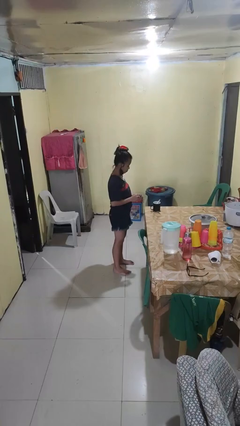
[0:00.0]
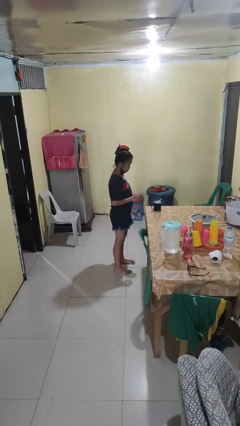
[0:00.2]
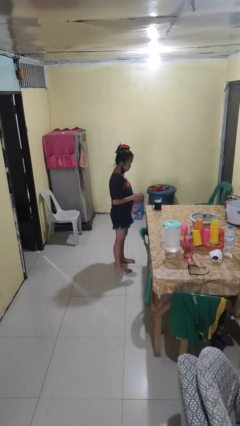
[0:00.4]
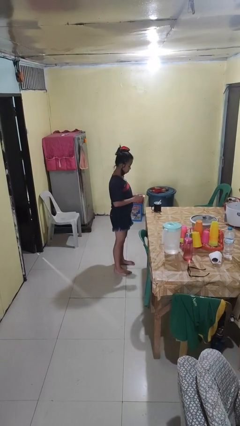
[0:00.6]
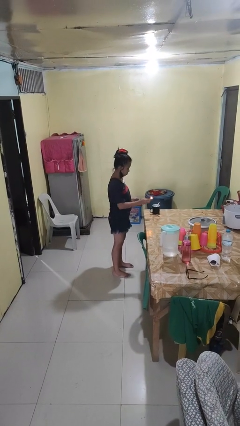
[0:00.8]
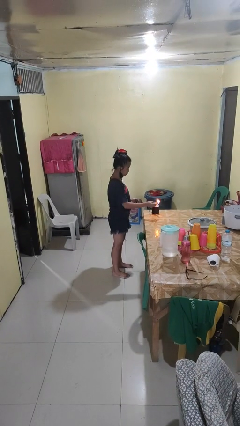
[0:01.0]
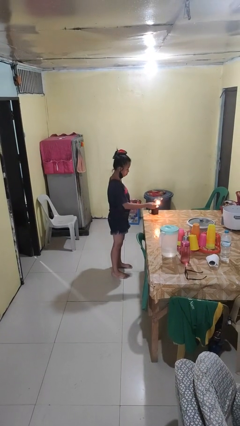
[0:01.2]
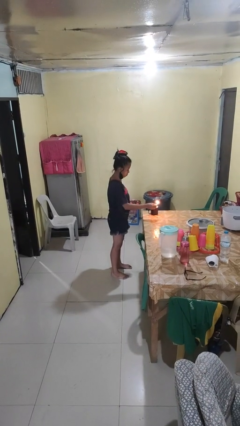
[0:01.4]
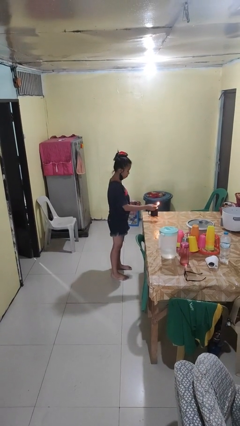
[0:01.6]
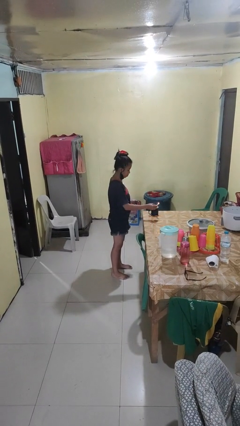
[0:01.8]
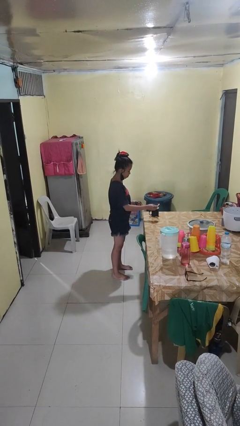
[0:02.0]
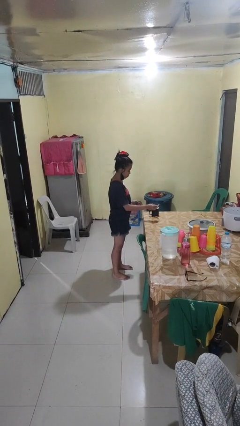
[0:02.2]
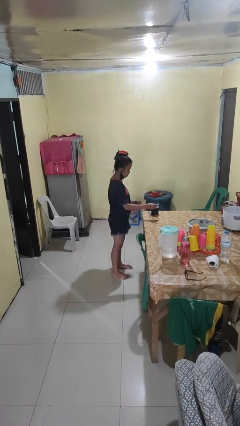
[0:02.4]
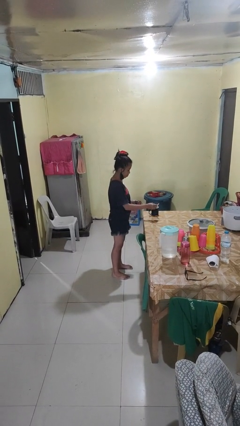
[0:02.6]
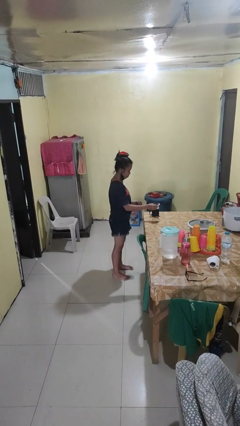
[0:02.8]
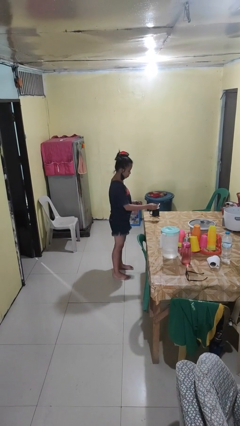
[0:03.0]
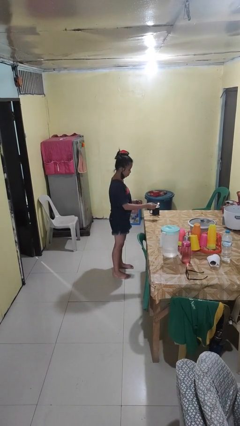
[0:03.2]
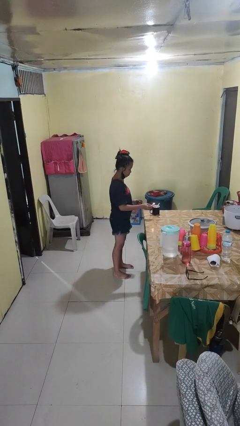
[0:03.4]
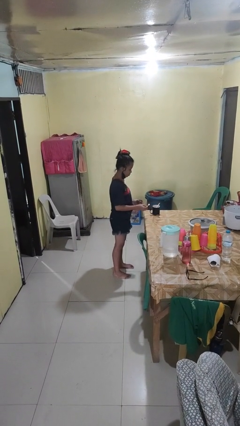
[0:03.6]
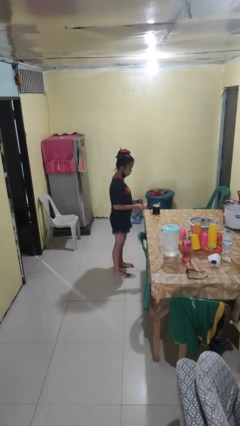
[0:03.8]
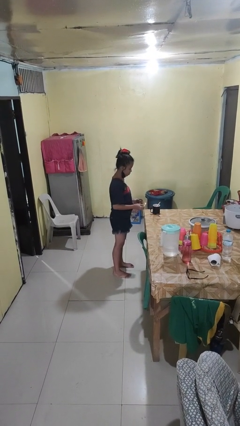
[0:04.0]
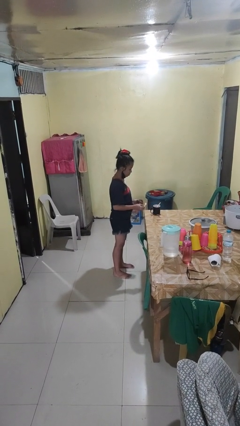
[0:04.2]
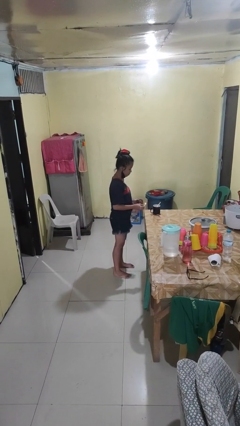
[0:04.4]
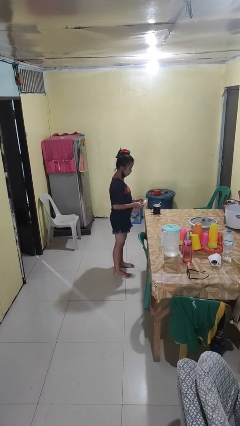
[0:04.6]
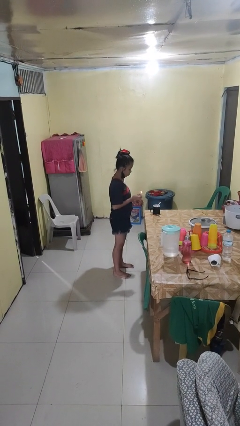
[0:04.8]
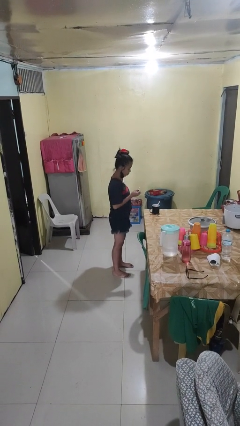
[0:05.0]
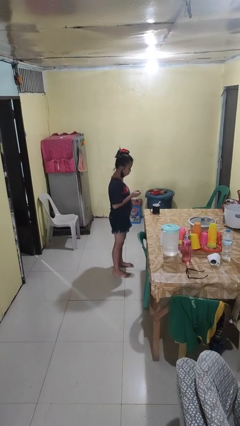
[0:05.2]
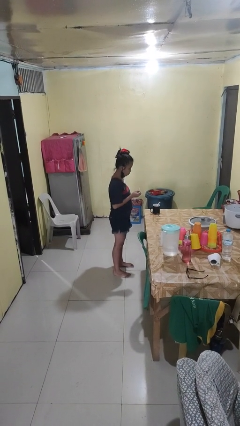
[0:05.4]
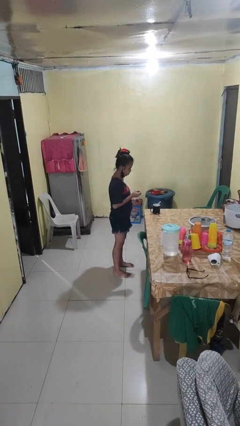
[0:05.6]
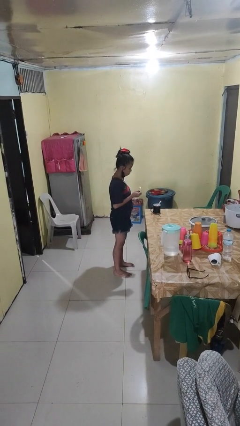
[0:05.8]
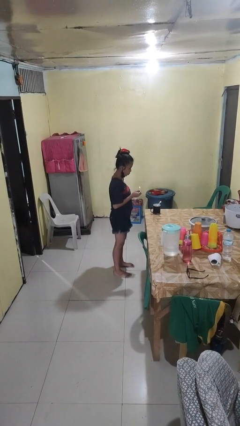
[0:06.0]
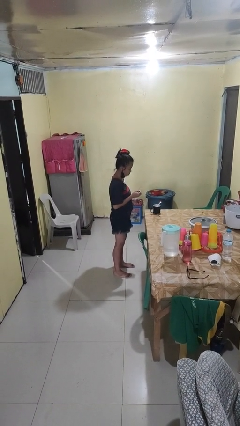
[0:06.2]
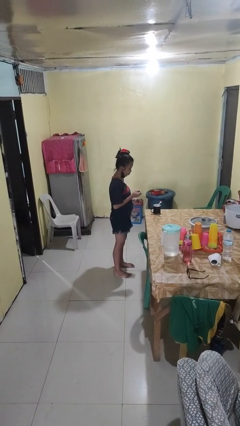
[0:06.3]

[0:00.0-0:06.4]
person lights candle

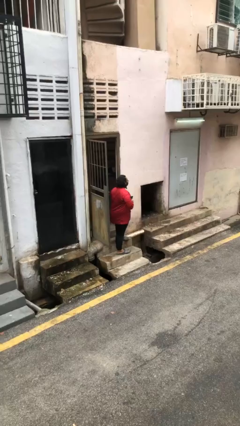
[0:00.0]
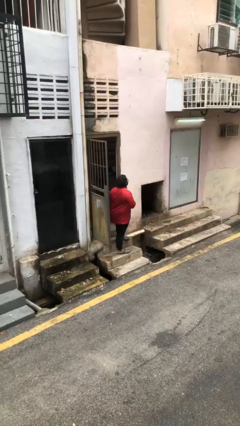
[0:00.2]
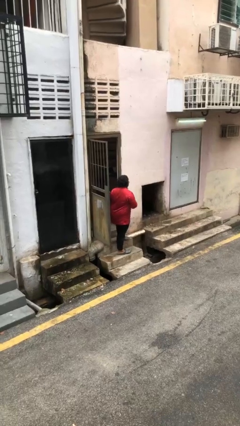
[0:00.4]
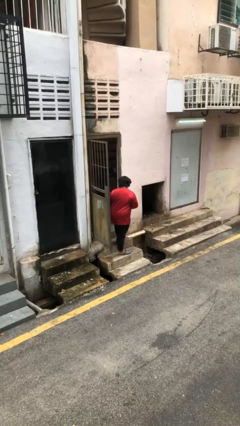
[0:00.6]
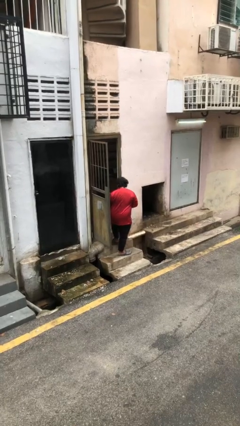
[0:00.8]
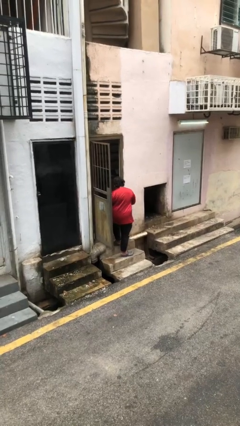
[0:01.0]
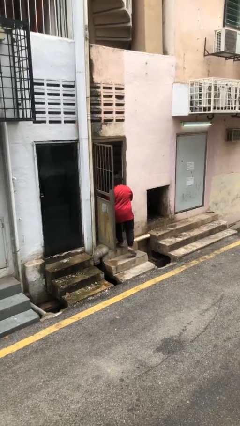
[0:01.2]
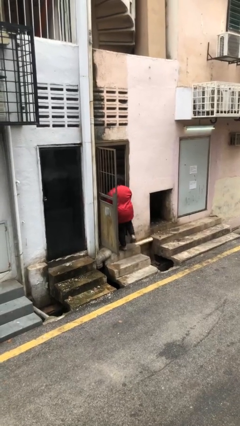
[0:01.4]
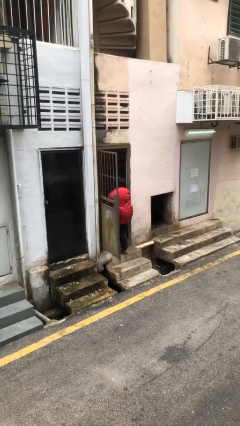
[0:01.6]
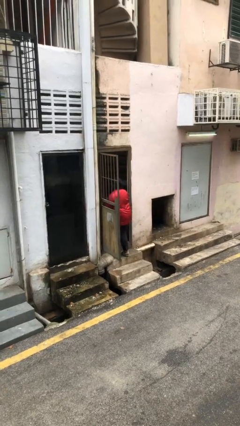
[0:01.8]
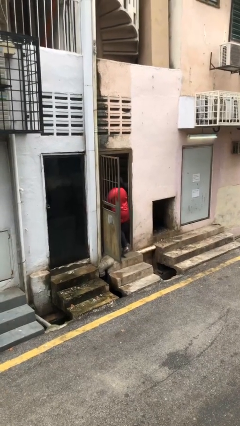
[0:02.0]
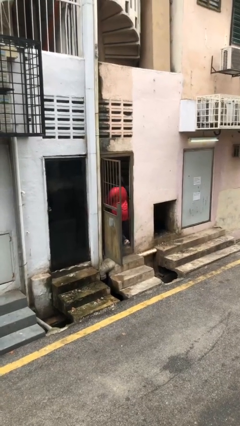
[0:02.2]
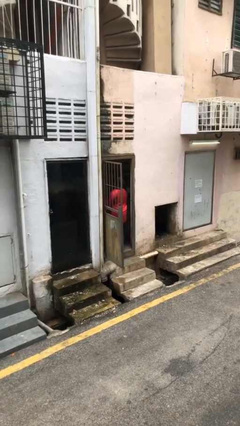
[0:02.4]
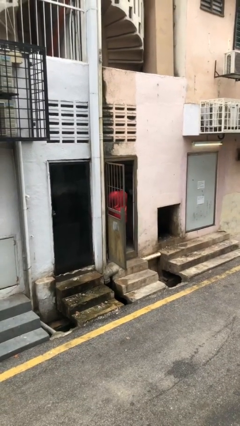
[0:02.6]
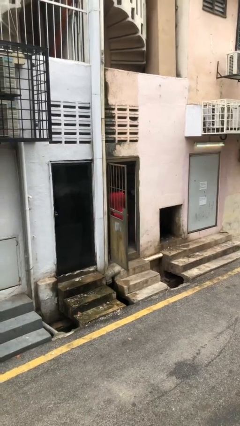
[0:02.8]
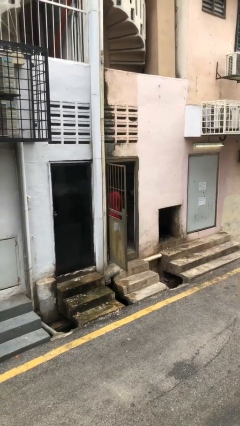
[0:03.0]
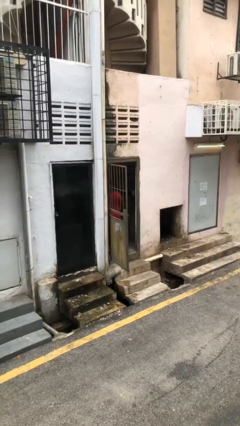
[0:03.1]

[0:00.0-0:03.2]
person exits scene through structure

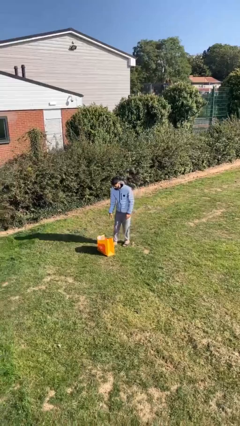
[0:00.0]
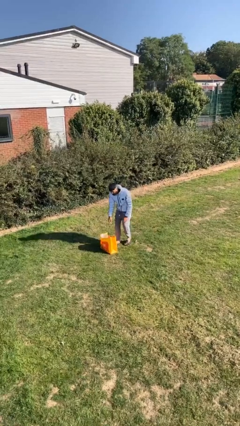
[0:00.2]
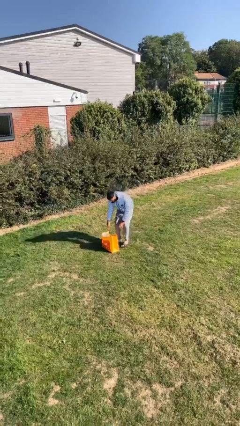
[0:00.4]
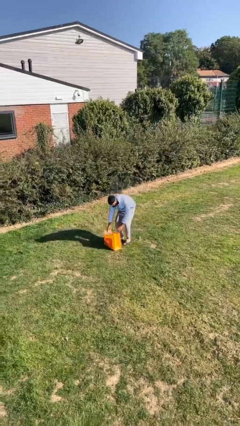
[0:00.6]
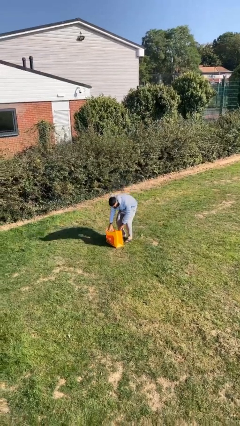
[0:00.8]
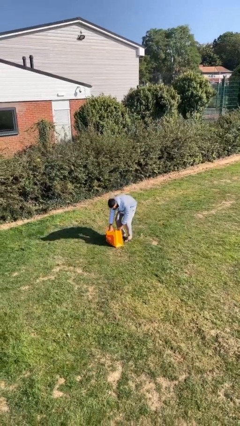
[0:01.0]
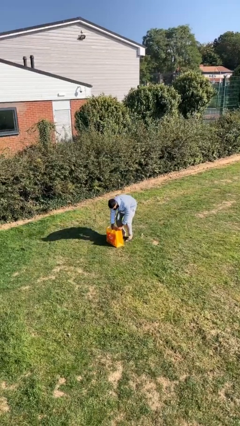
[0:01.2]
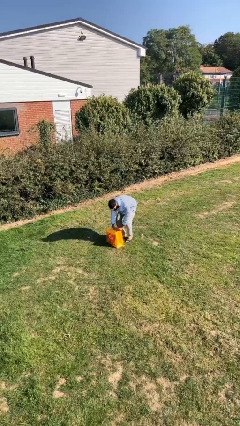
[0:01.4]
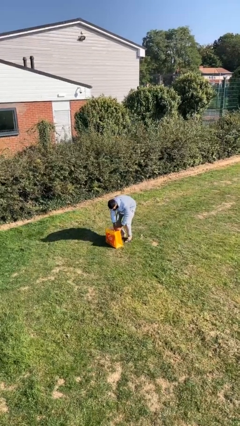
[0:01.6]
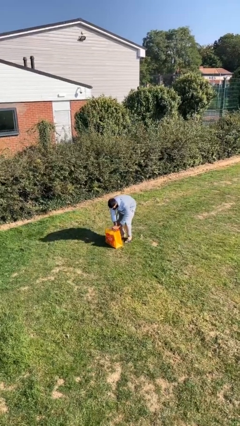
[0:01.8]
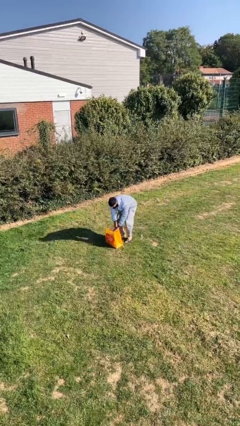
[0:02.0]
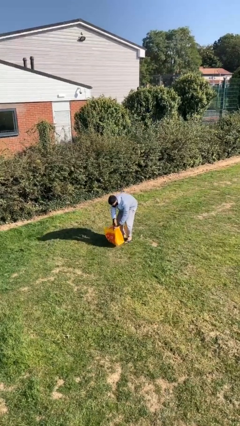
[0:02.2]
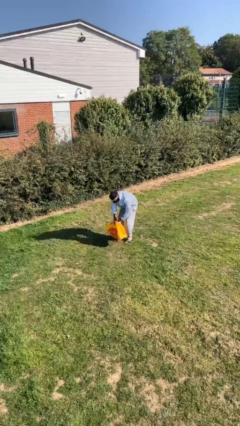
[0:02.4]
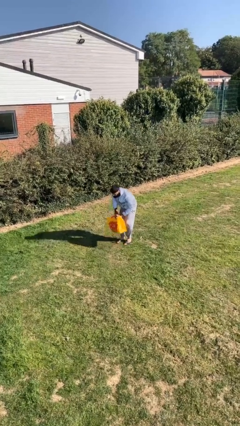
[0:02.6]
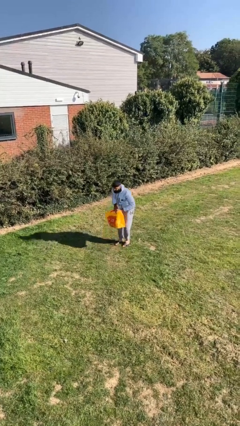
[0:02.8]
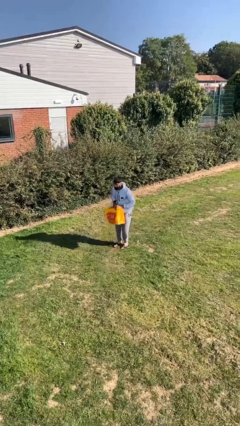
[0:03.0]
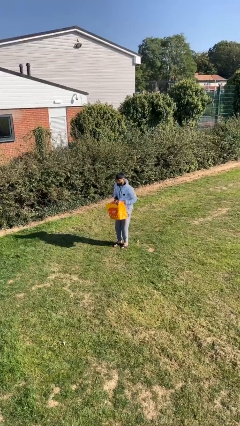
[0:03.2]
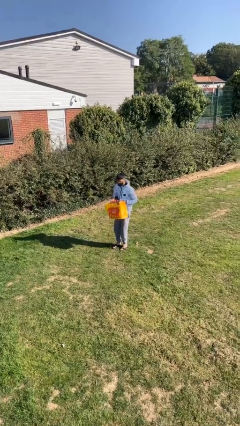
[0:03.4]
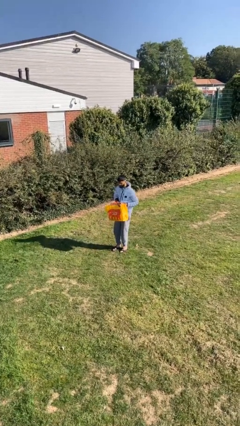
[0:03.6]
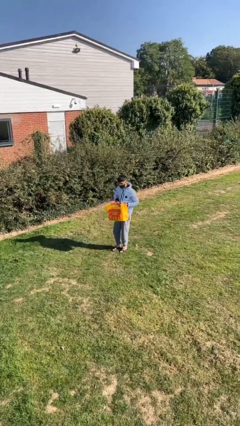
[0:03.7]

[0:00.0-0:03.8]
person picks up object from floor

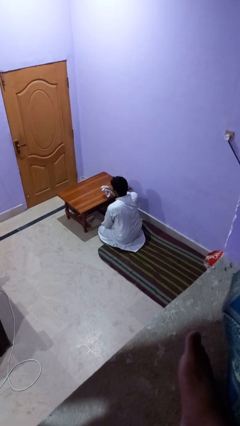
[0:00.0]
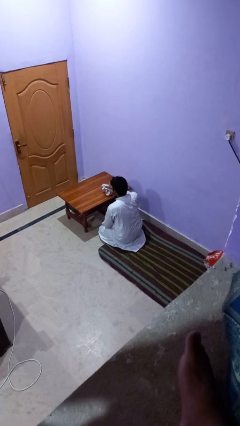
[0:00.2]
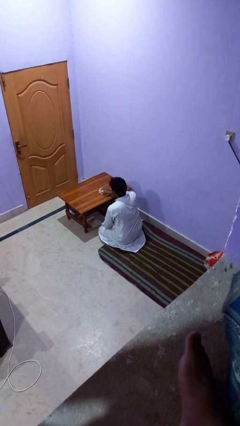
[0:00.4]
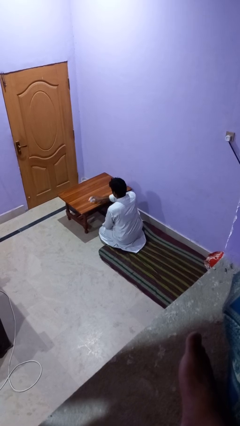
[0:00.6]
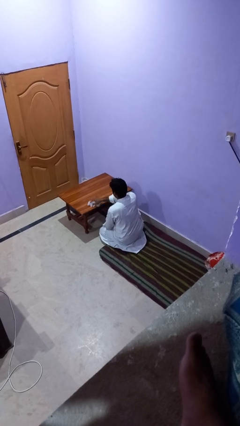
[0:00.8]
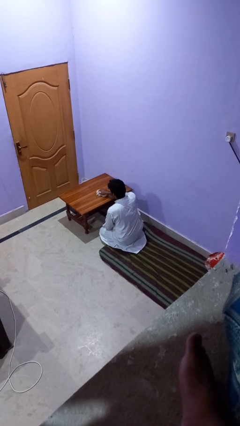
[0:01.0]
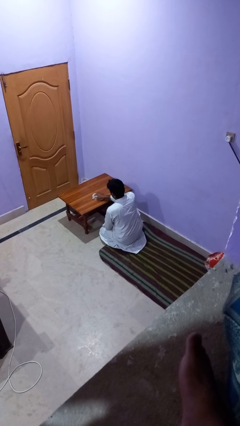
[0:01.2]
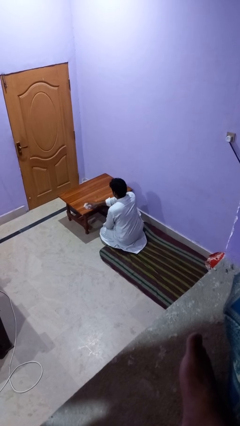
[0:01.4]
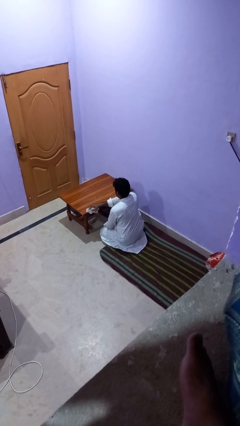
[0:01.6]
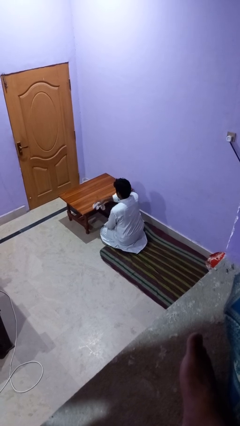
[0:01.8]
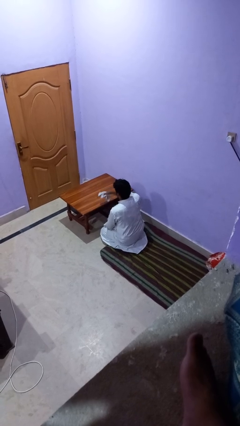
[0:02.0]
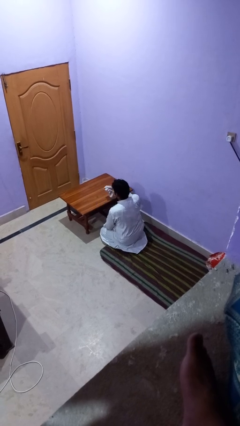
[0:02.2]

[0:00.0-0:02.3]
person cleans table with rag

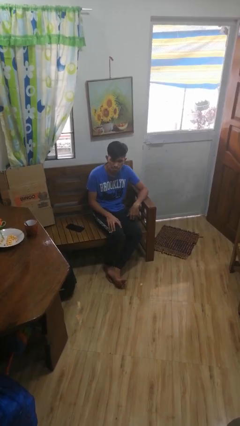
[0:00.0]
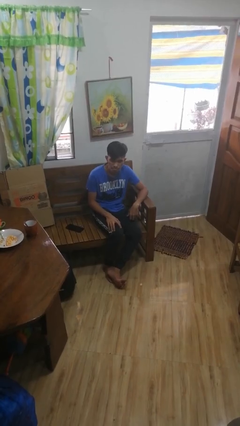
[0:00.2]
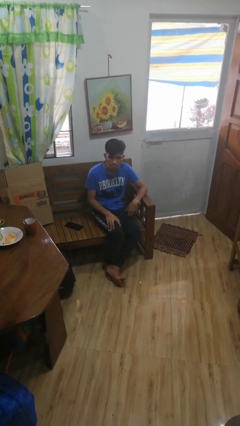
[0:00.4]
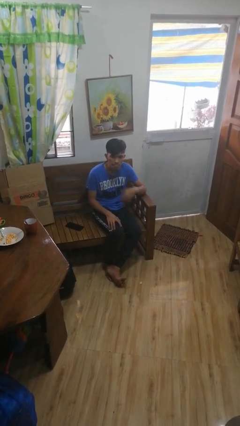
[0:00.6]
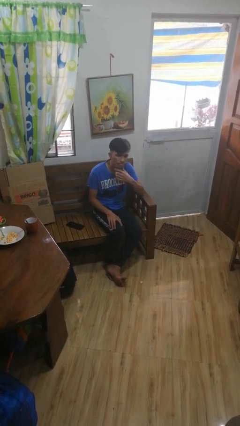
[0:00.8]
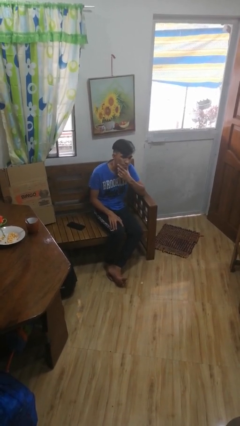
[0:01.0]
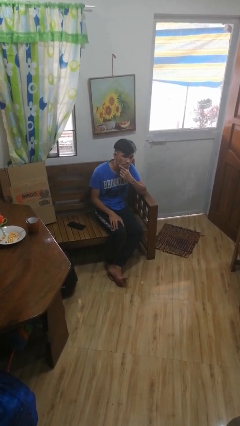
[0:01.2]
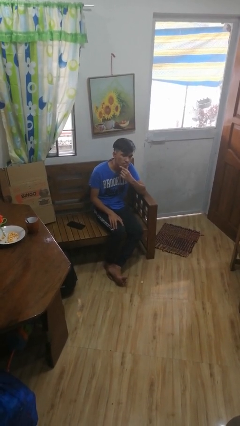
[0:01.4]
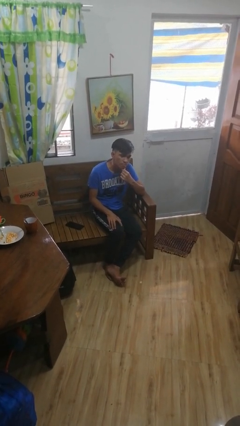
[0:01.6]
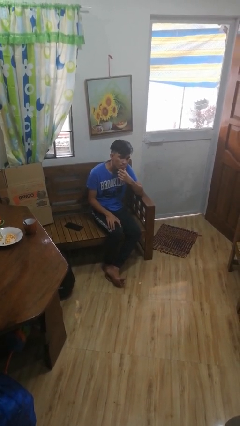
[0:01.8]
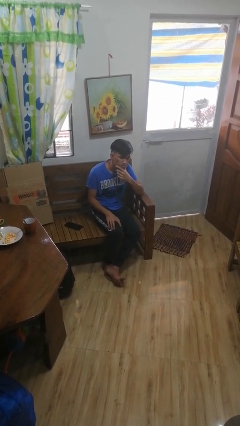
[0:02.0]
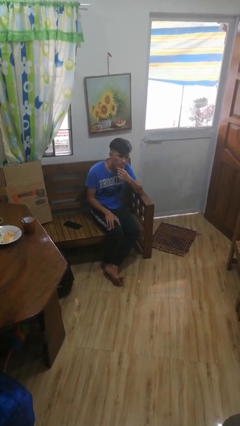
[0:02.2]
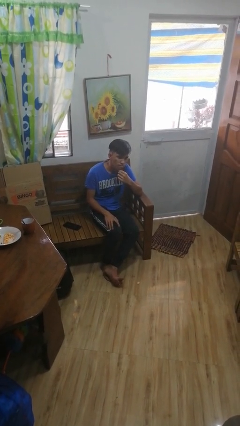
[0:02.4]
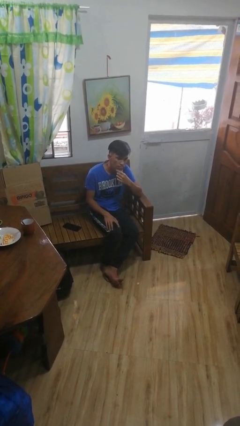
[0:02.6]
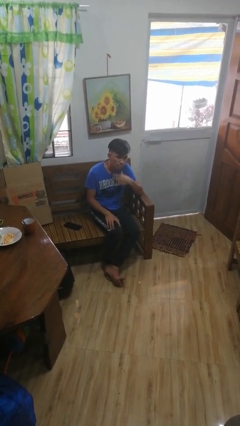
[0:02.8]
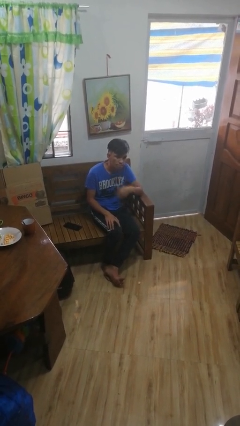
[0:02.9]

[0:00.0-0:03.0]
person strokes chin
